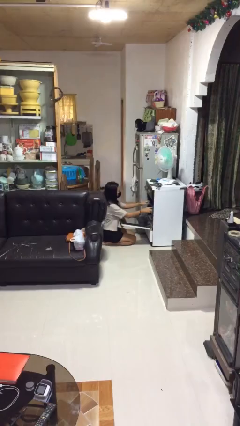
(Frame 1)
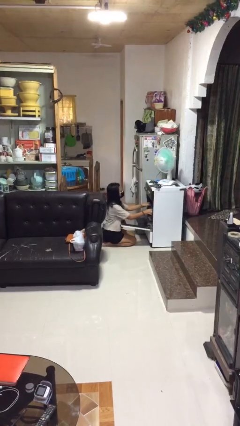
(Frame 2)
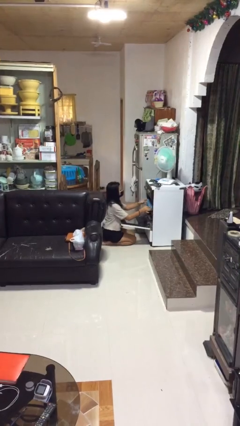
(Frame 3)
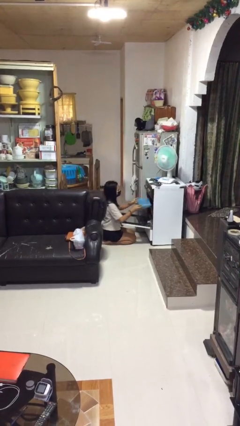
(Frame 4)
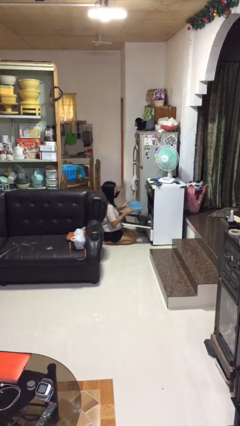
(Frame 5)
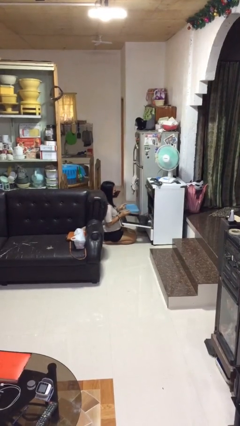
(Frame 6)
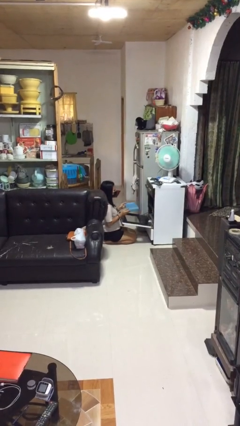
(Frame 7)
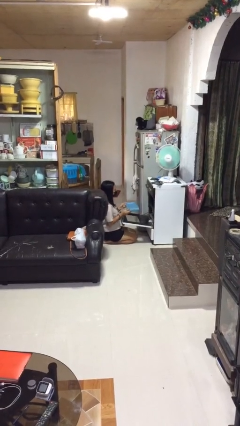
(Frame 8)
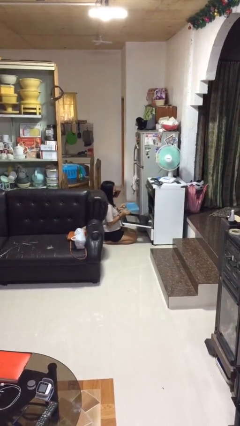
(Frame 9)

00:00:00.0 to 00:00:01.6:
person takes object from oven

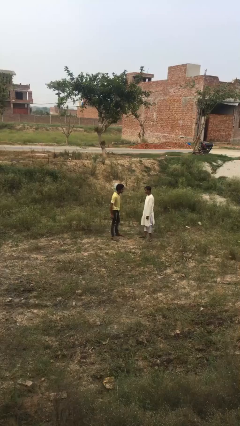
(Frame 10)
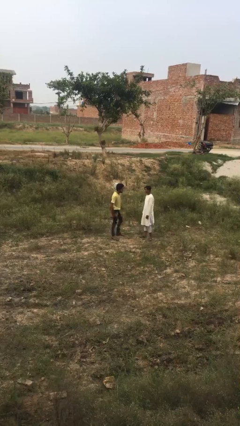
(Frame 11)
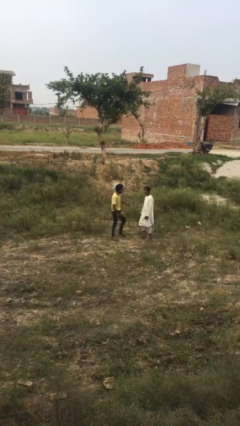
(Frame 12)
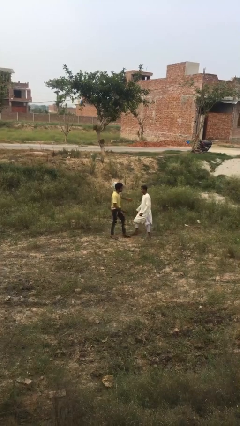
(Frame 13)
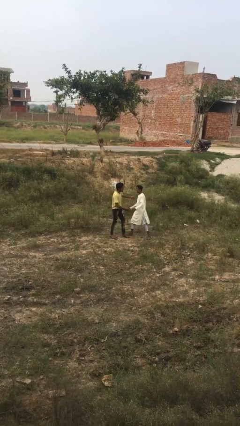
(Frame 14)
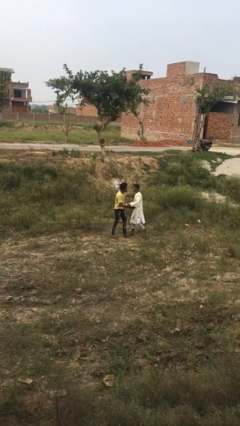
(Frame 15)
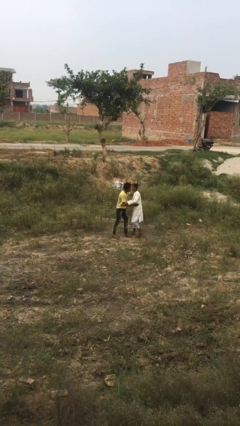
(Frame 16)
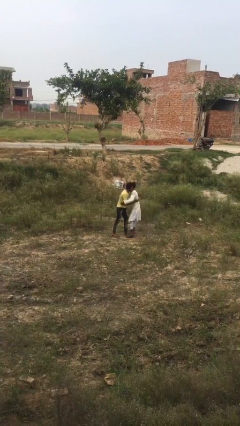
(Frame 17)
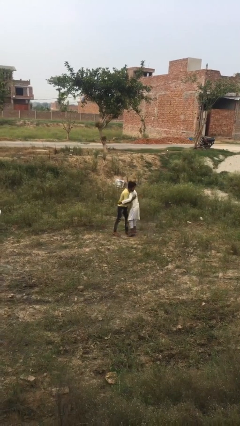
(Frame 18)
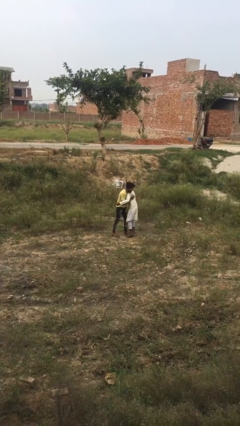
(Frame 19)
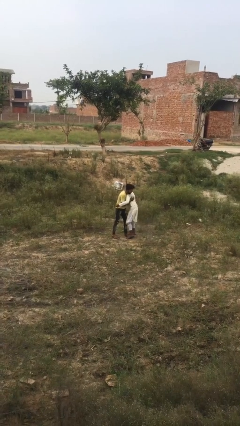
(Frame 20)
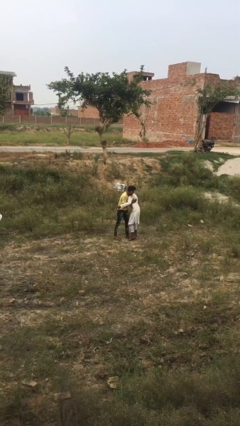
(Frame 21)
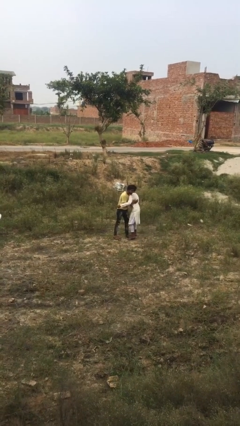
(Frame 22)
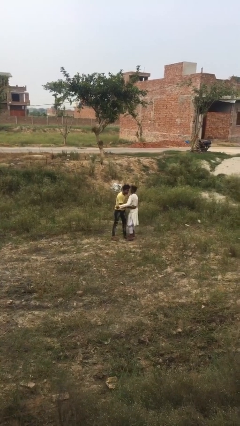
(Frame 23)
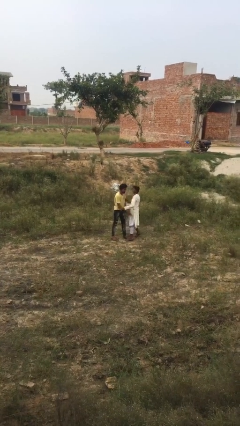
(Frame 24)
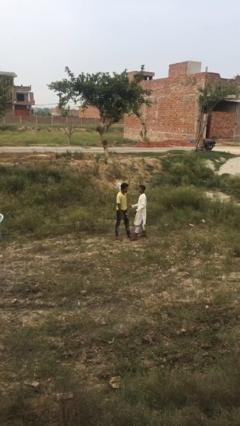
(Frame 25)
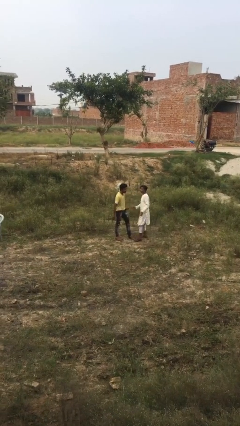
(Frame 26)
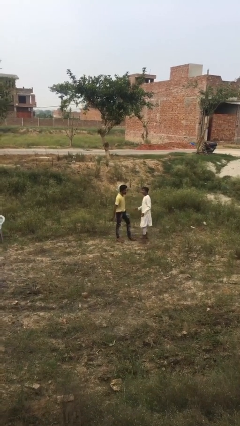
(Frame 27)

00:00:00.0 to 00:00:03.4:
person embraces person

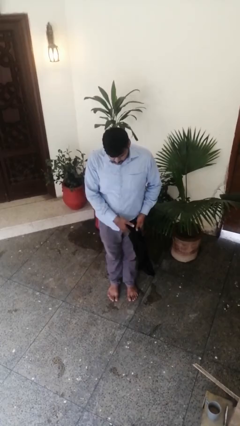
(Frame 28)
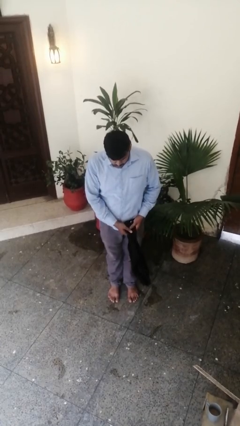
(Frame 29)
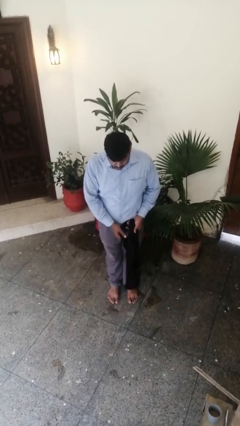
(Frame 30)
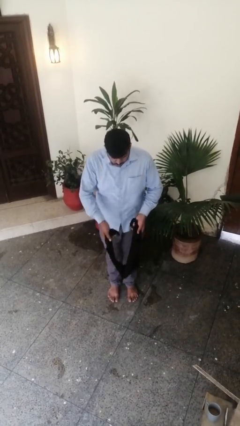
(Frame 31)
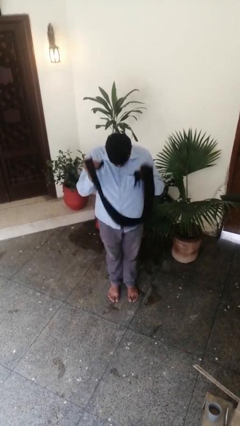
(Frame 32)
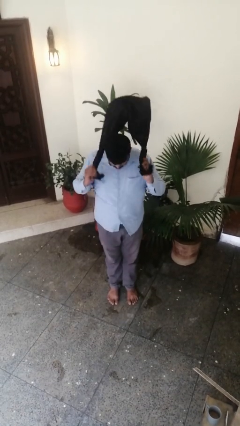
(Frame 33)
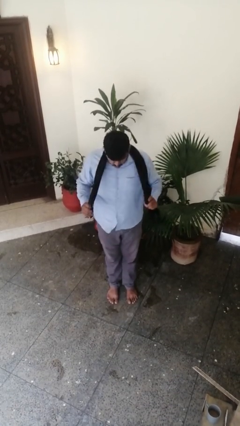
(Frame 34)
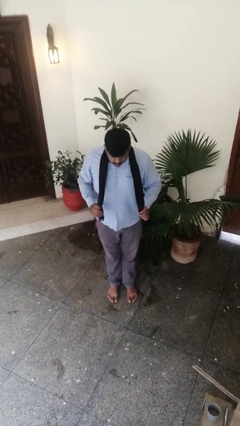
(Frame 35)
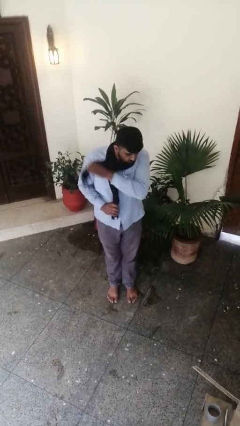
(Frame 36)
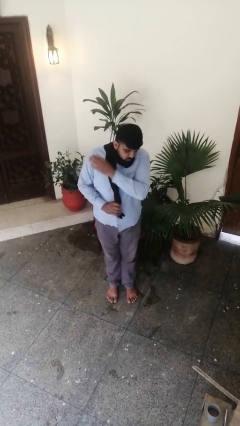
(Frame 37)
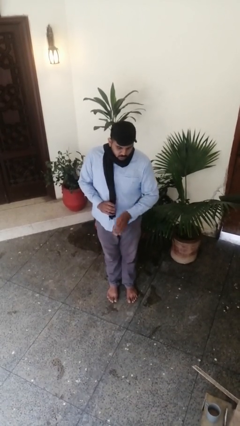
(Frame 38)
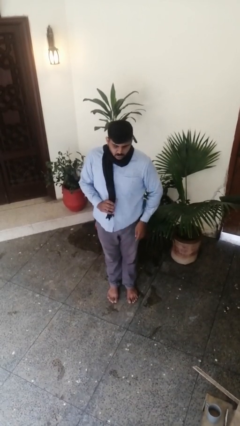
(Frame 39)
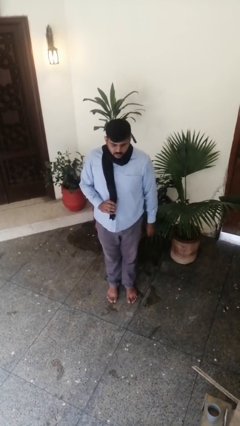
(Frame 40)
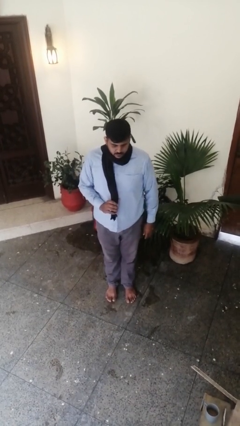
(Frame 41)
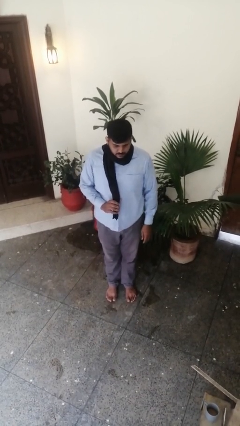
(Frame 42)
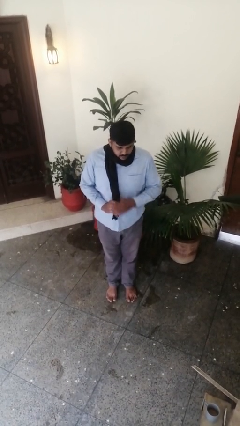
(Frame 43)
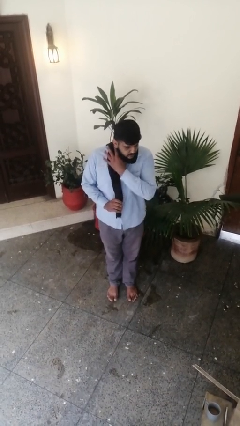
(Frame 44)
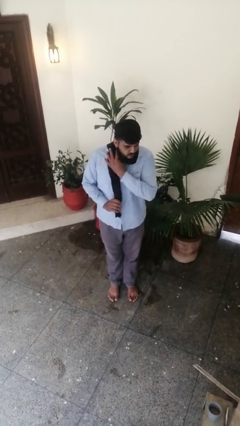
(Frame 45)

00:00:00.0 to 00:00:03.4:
person puts on scarf

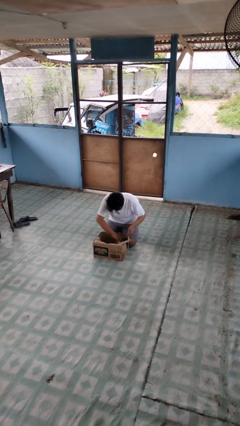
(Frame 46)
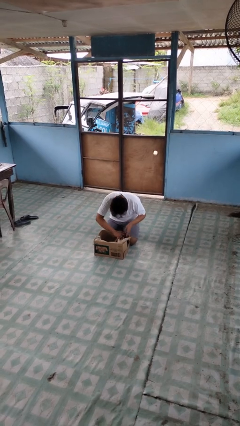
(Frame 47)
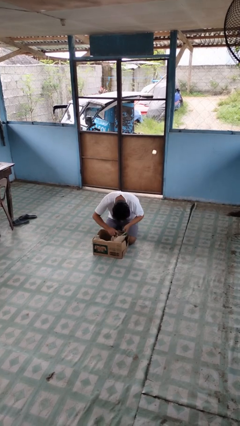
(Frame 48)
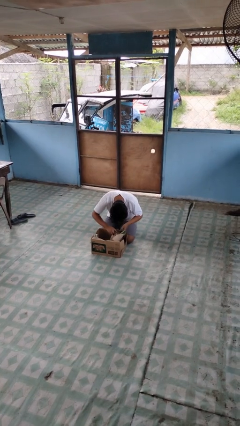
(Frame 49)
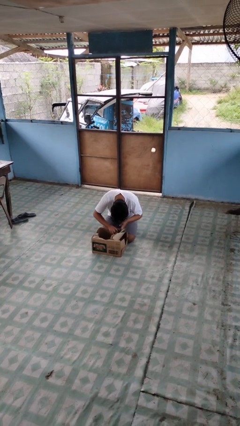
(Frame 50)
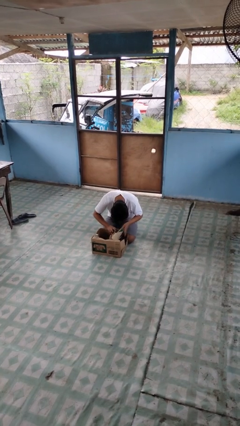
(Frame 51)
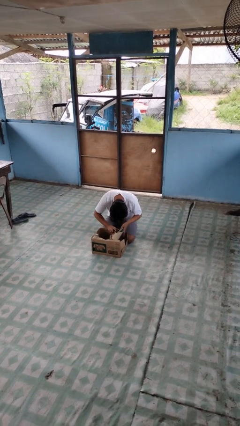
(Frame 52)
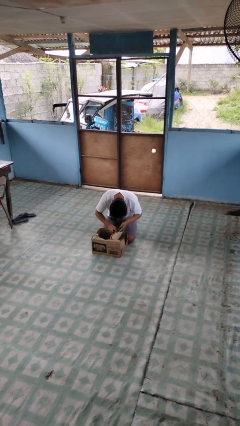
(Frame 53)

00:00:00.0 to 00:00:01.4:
person searches in box

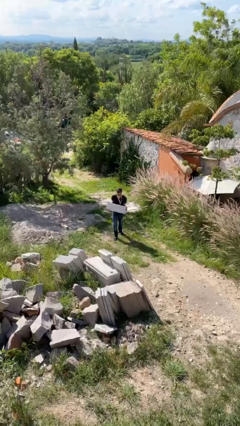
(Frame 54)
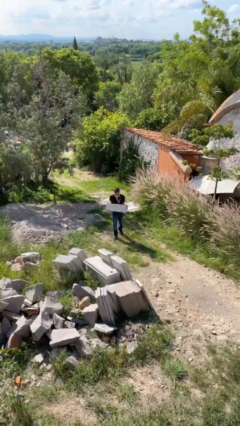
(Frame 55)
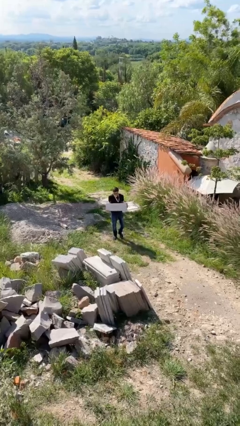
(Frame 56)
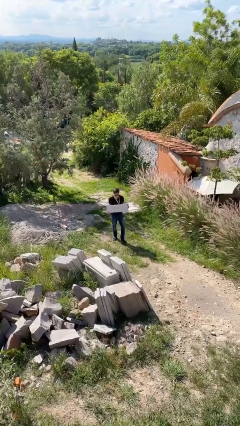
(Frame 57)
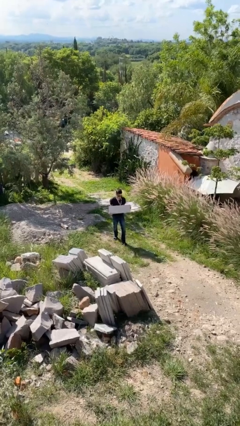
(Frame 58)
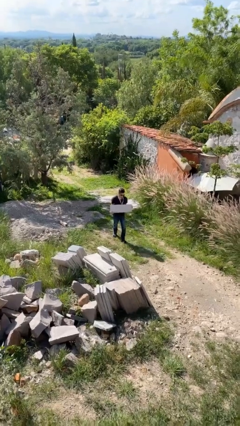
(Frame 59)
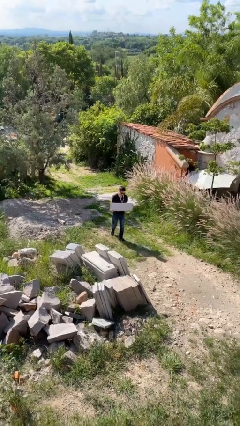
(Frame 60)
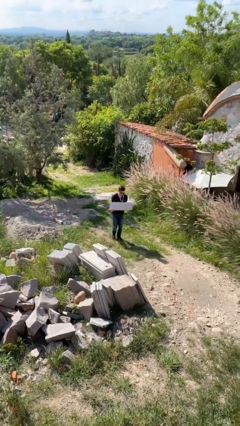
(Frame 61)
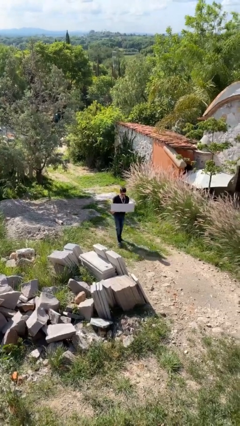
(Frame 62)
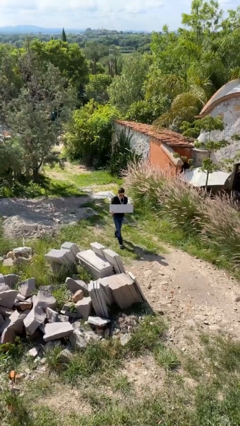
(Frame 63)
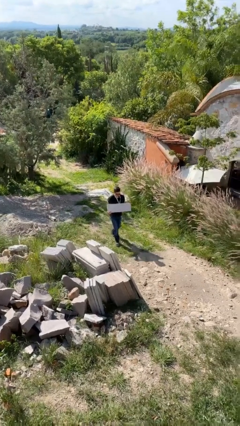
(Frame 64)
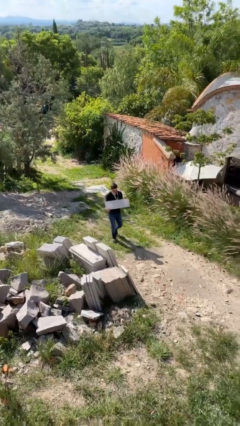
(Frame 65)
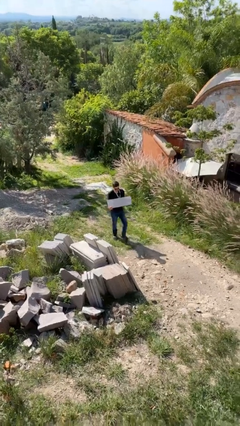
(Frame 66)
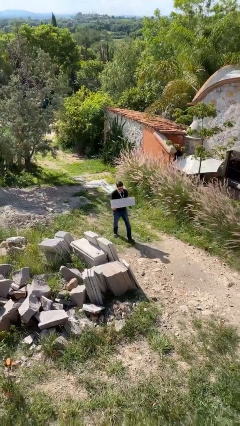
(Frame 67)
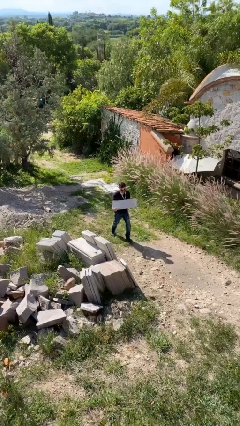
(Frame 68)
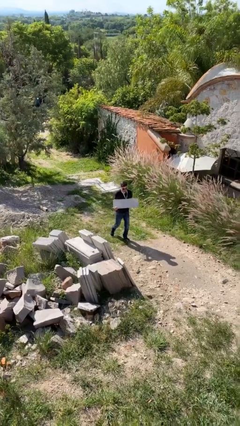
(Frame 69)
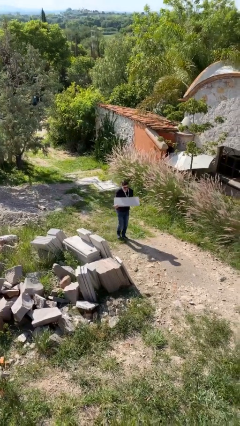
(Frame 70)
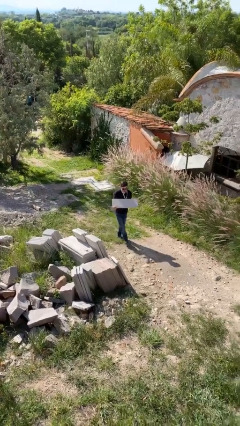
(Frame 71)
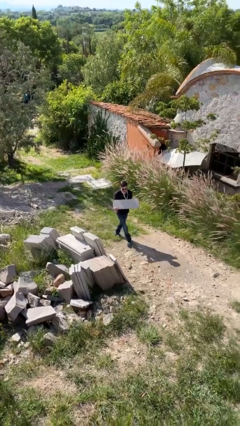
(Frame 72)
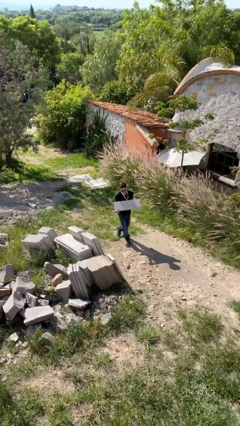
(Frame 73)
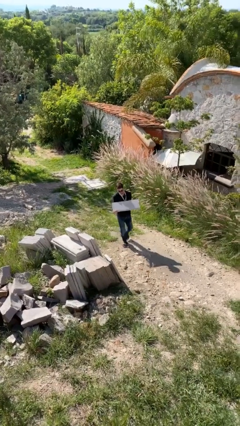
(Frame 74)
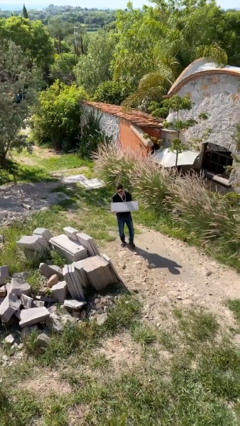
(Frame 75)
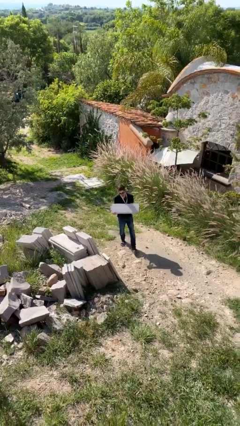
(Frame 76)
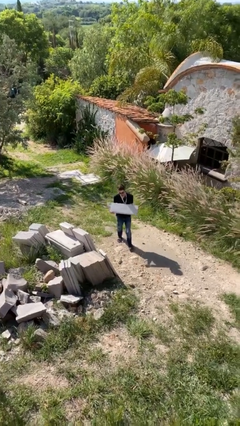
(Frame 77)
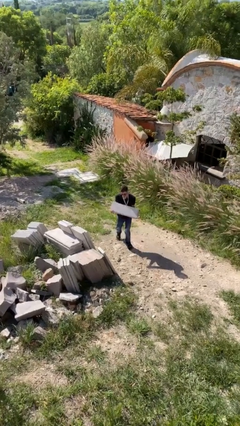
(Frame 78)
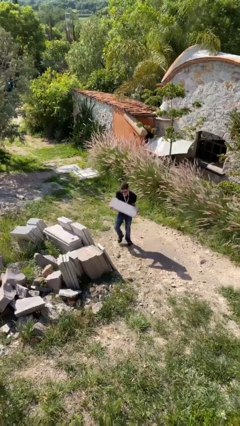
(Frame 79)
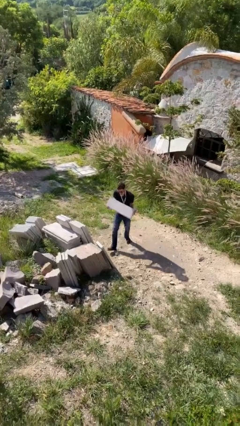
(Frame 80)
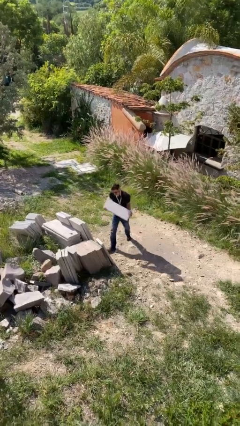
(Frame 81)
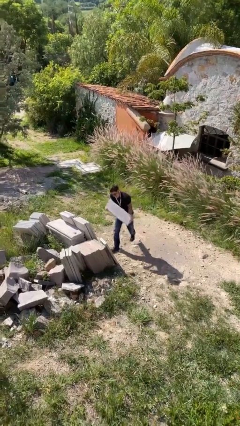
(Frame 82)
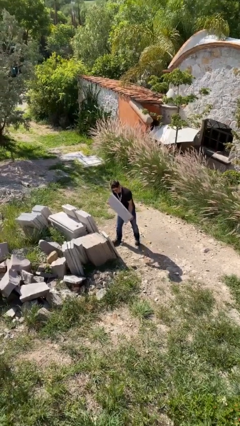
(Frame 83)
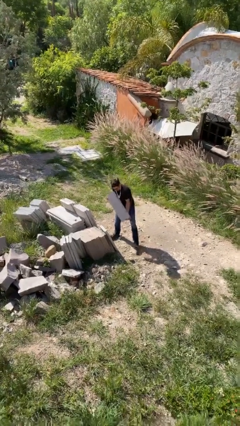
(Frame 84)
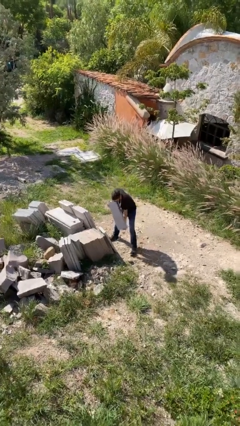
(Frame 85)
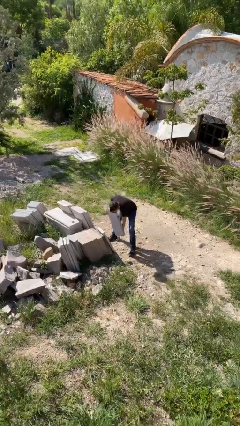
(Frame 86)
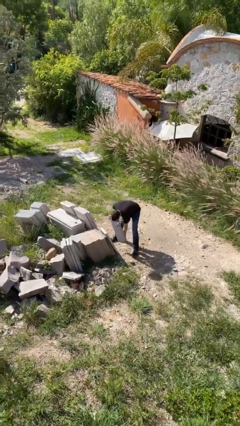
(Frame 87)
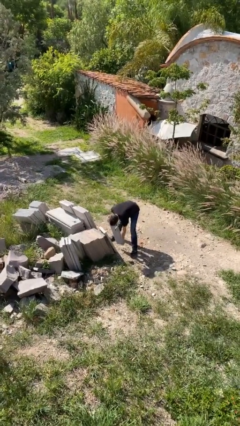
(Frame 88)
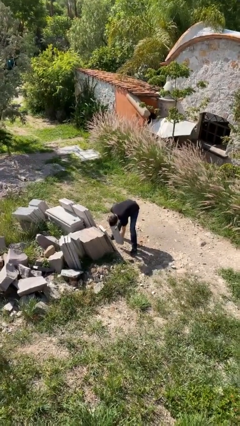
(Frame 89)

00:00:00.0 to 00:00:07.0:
person carries heavy object

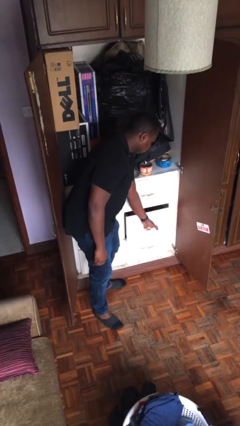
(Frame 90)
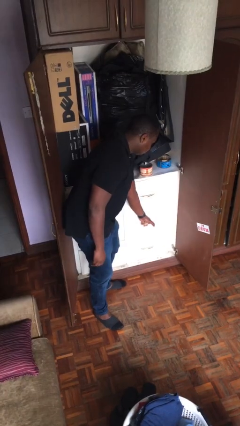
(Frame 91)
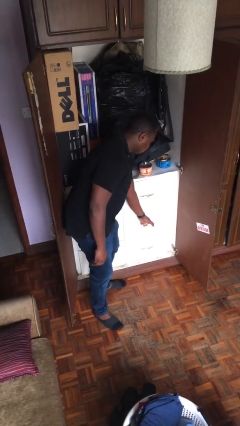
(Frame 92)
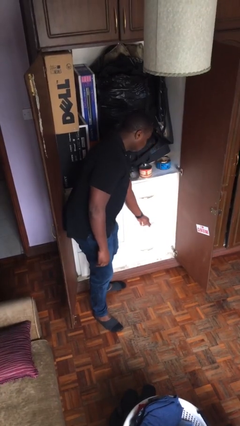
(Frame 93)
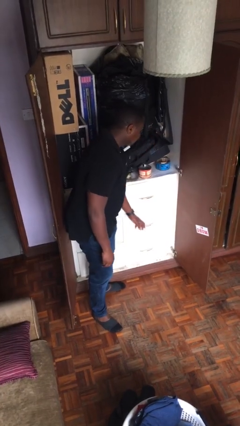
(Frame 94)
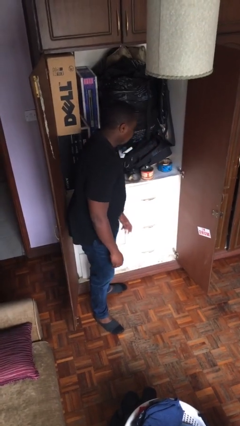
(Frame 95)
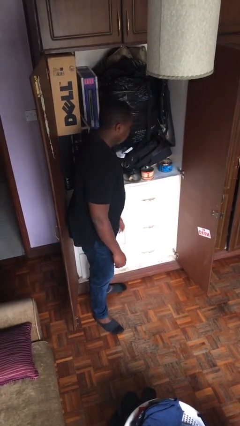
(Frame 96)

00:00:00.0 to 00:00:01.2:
person closes dresser drawer
